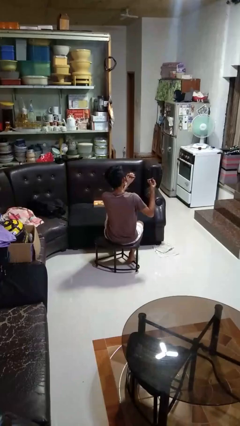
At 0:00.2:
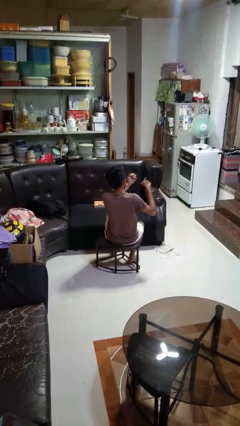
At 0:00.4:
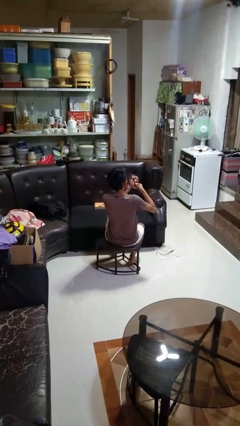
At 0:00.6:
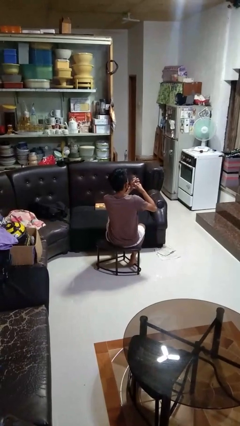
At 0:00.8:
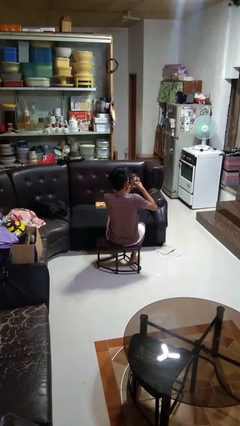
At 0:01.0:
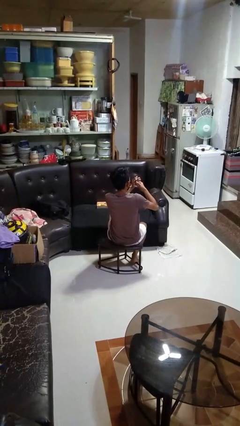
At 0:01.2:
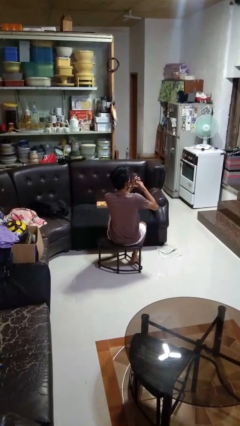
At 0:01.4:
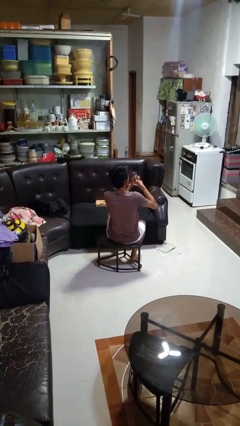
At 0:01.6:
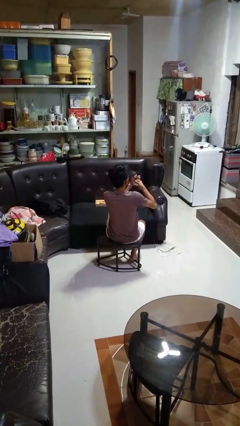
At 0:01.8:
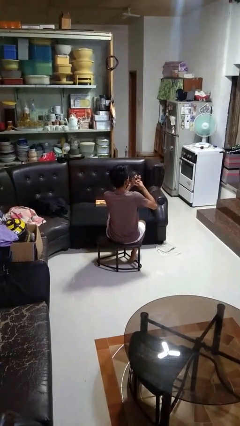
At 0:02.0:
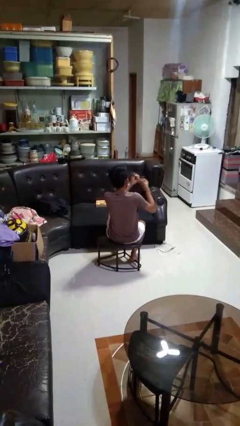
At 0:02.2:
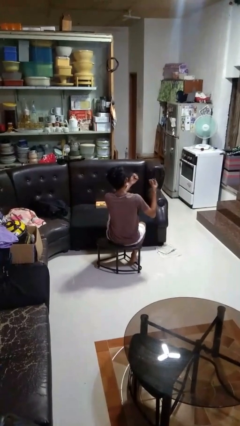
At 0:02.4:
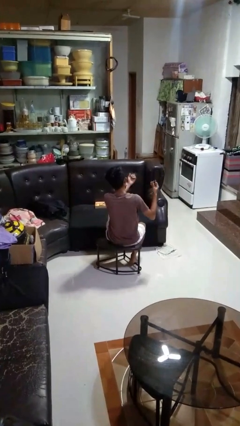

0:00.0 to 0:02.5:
person clips fingernails

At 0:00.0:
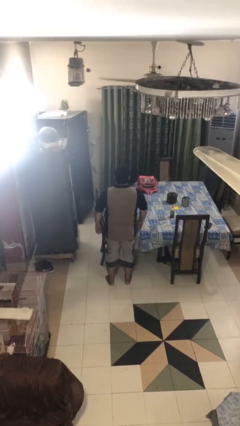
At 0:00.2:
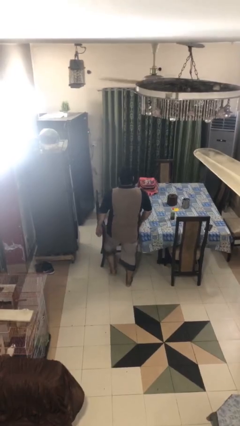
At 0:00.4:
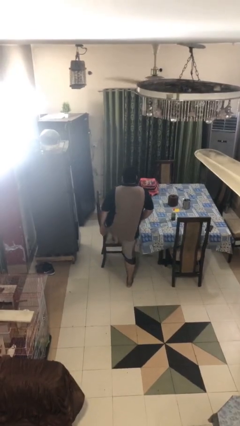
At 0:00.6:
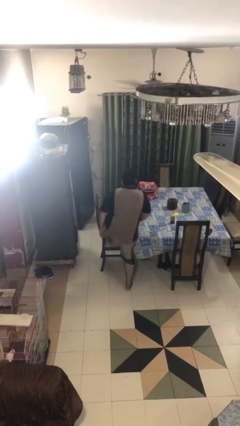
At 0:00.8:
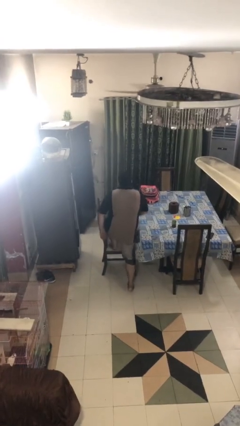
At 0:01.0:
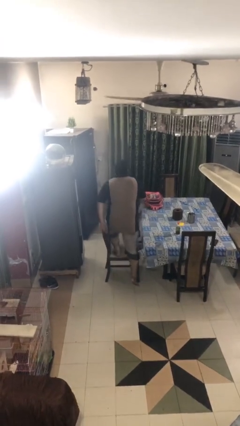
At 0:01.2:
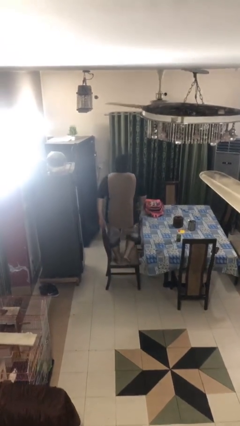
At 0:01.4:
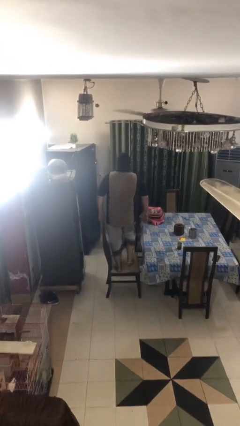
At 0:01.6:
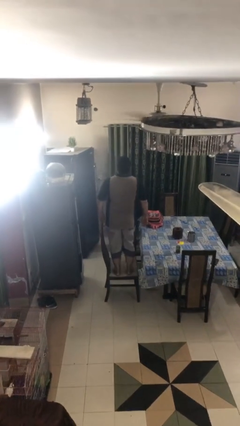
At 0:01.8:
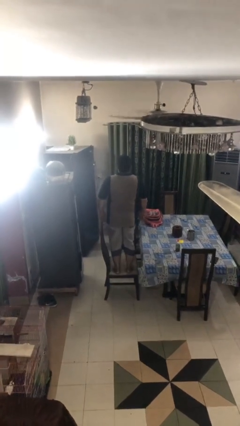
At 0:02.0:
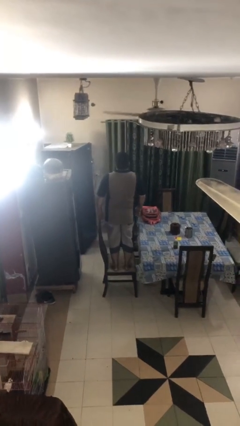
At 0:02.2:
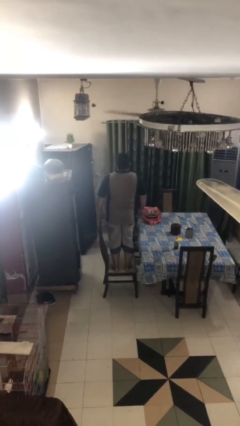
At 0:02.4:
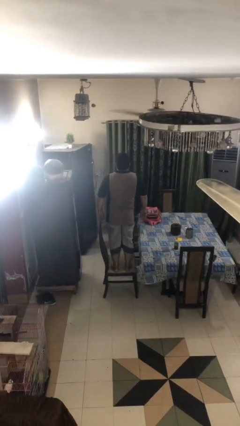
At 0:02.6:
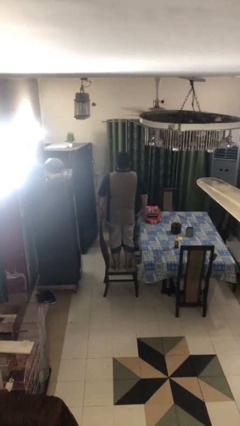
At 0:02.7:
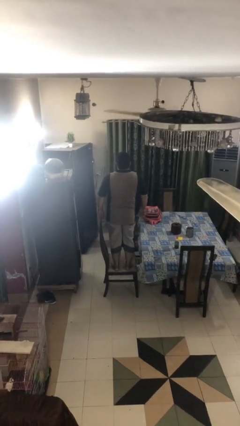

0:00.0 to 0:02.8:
person climbs on chair

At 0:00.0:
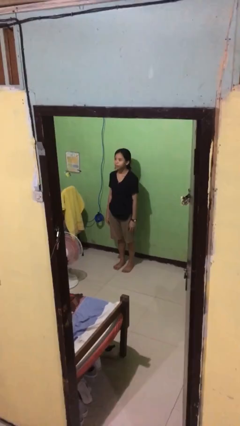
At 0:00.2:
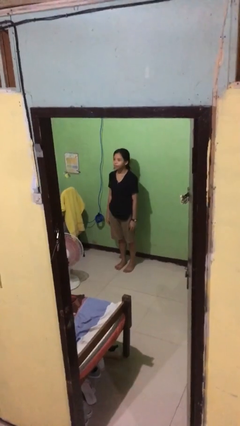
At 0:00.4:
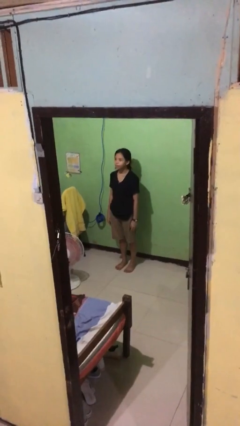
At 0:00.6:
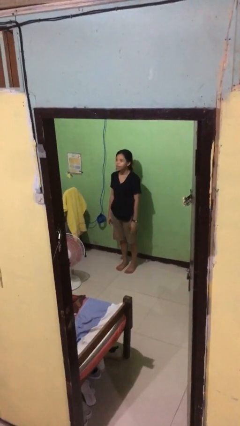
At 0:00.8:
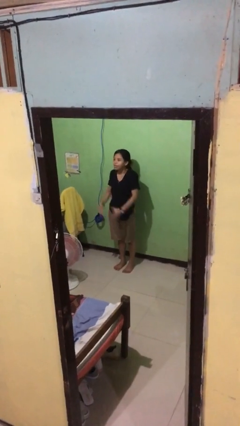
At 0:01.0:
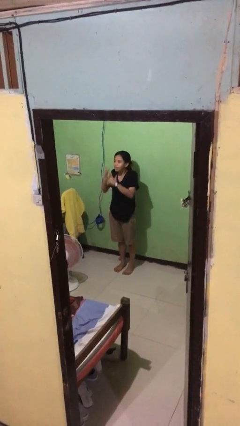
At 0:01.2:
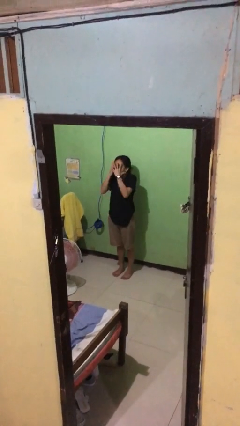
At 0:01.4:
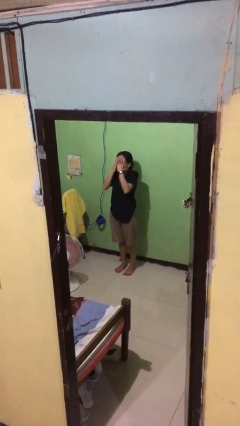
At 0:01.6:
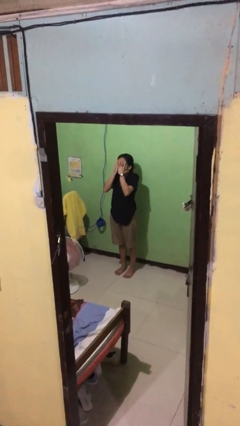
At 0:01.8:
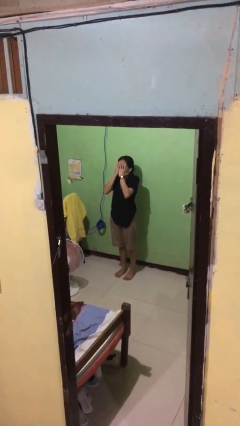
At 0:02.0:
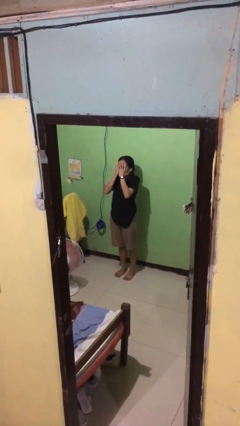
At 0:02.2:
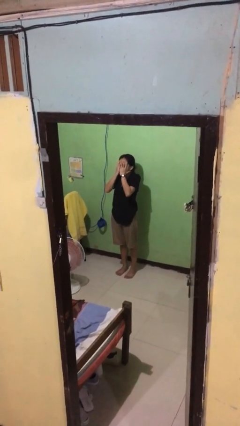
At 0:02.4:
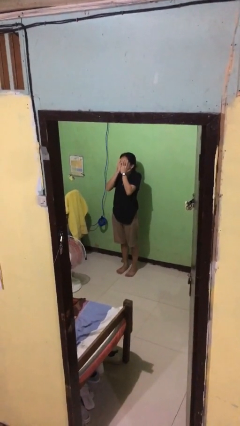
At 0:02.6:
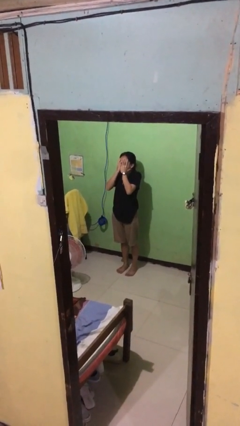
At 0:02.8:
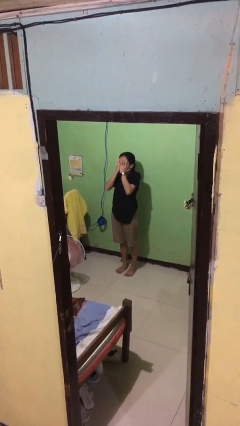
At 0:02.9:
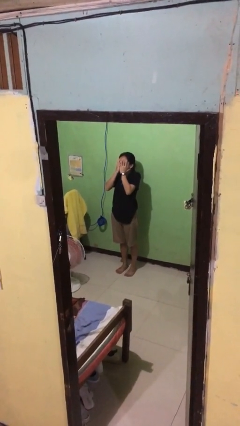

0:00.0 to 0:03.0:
person covers face with hands

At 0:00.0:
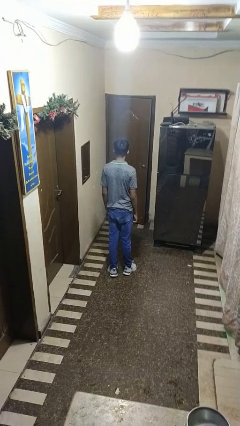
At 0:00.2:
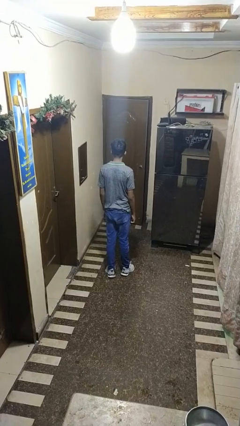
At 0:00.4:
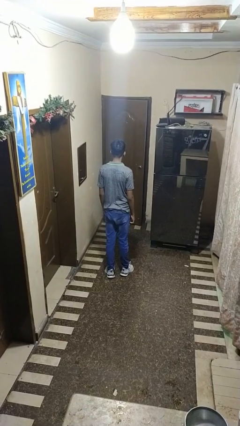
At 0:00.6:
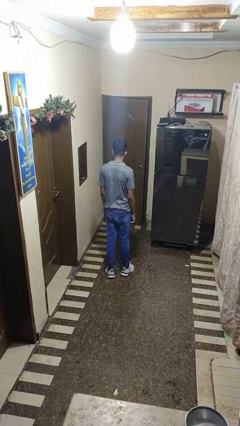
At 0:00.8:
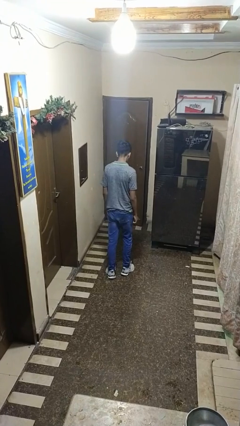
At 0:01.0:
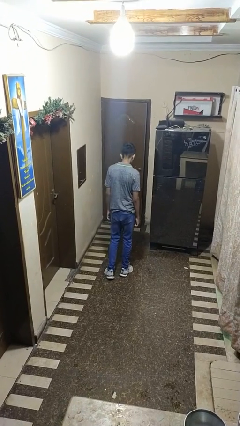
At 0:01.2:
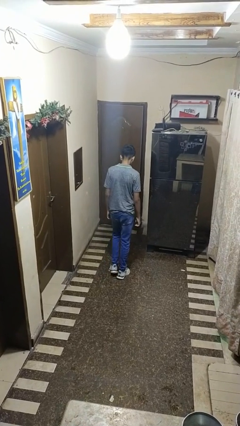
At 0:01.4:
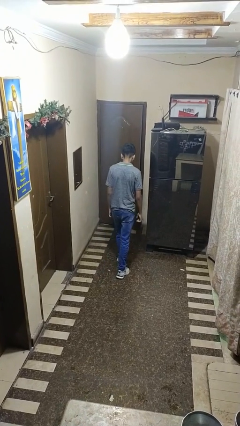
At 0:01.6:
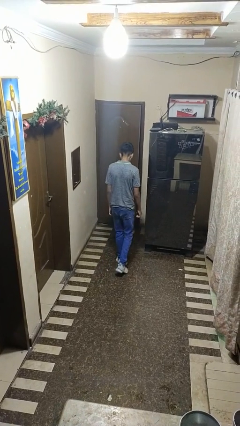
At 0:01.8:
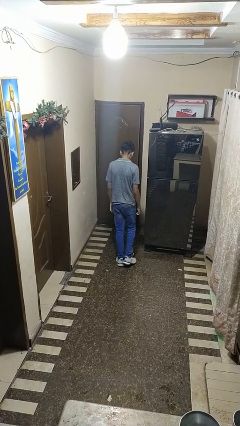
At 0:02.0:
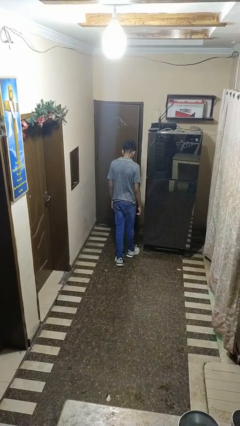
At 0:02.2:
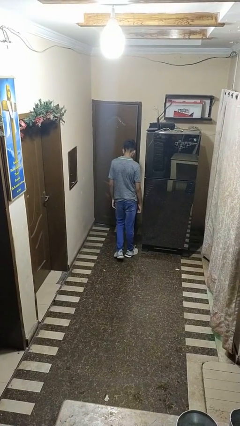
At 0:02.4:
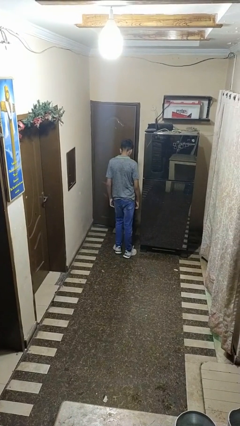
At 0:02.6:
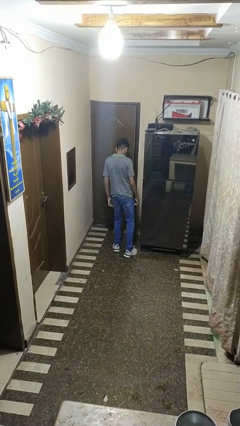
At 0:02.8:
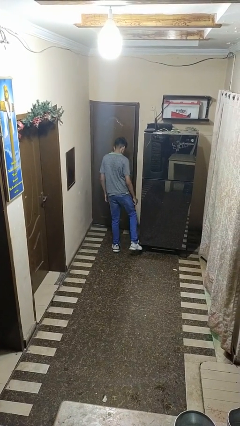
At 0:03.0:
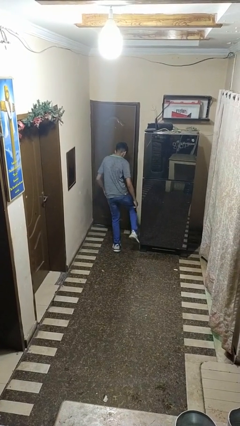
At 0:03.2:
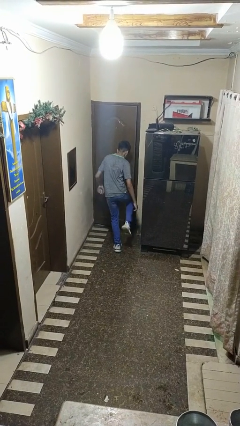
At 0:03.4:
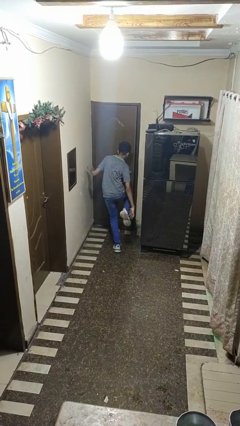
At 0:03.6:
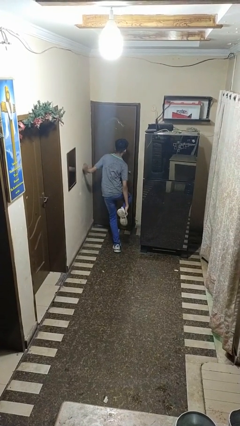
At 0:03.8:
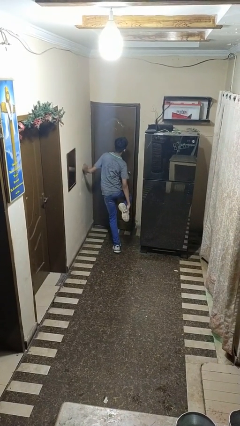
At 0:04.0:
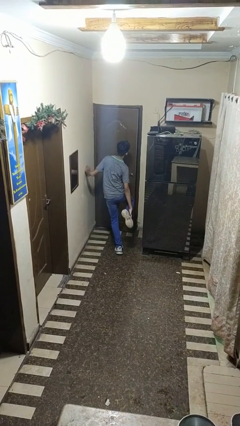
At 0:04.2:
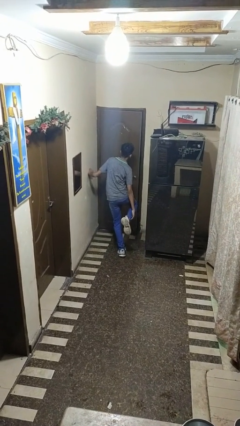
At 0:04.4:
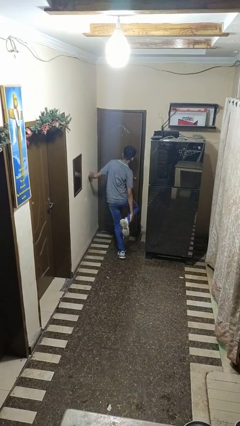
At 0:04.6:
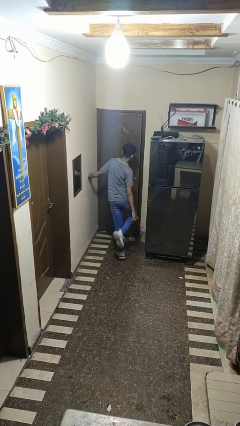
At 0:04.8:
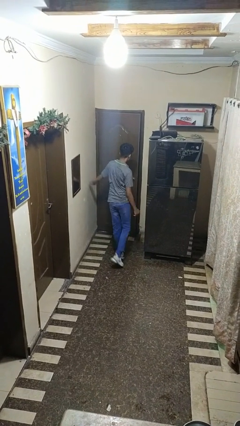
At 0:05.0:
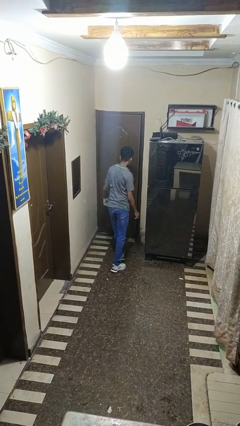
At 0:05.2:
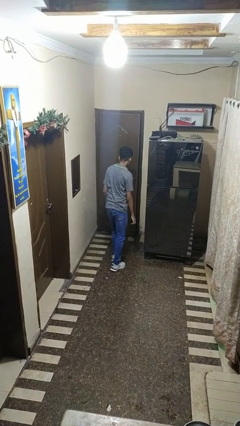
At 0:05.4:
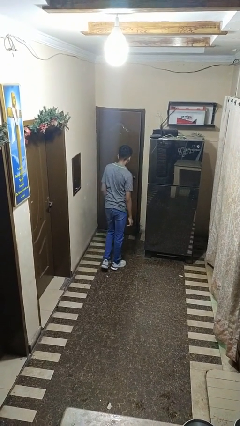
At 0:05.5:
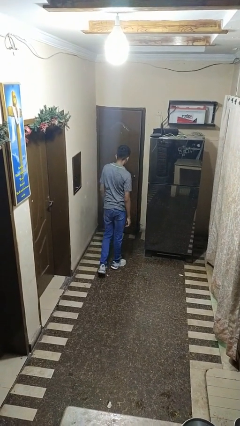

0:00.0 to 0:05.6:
person stubs toe

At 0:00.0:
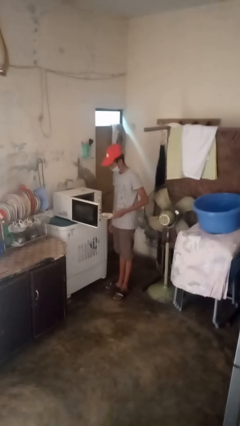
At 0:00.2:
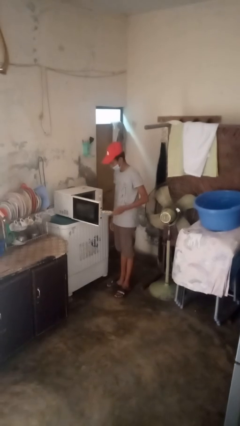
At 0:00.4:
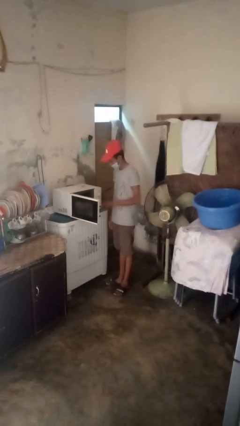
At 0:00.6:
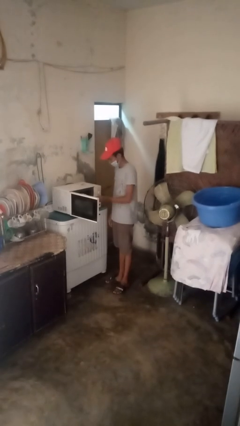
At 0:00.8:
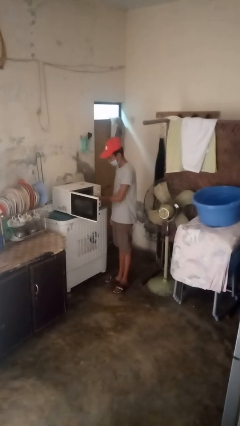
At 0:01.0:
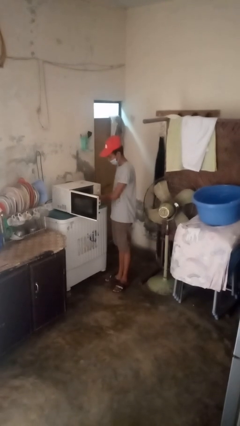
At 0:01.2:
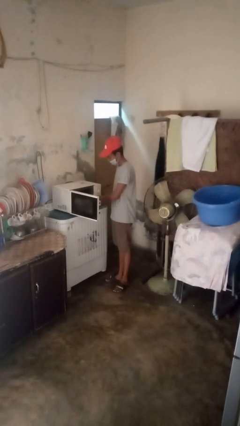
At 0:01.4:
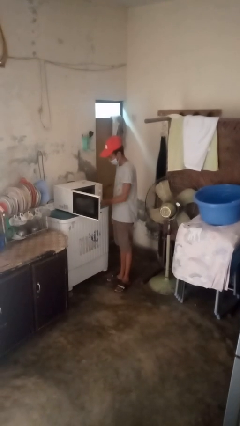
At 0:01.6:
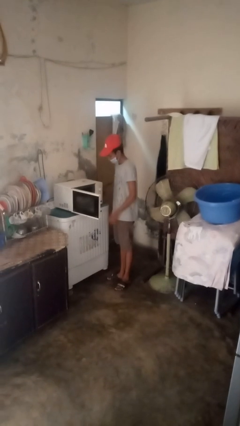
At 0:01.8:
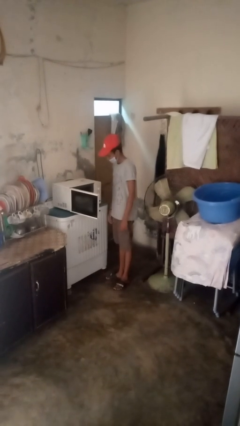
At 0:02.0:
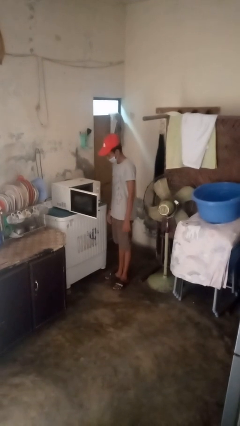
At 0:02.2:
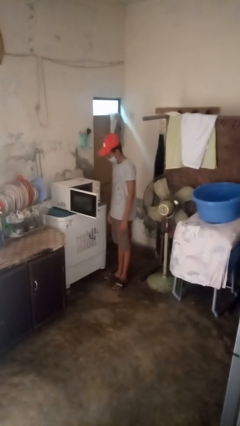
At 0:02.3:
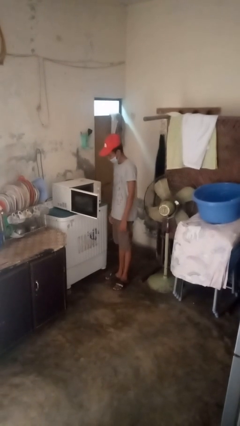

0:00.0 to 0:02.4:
person puts object into microwave

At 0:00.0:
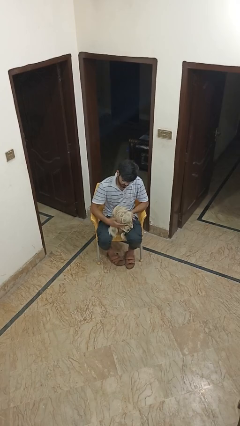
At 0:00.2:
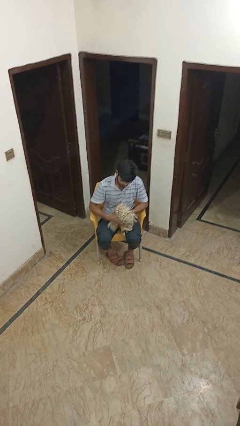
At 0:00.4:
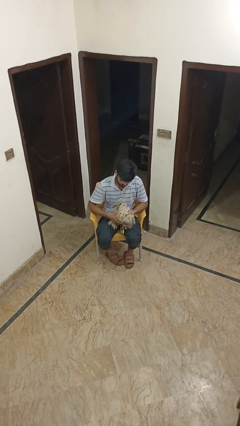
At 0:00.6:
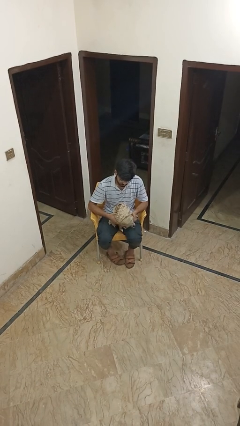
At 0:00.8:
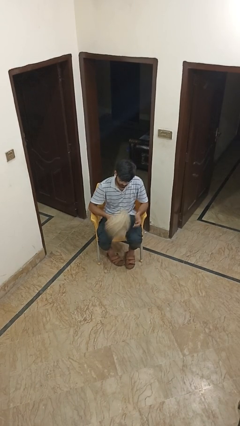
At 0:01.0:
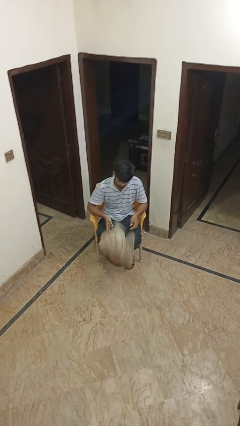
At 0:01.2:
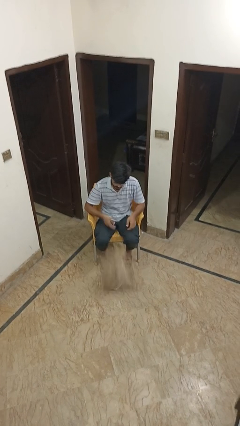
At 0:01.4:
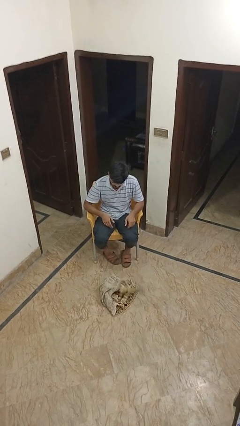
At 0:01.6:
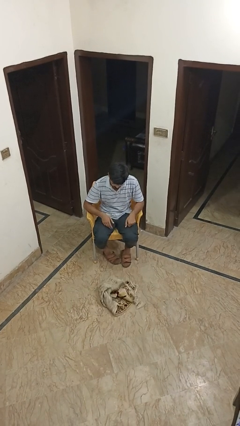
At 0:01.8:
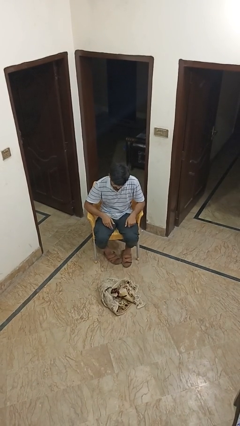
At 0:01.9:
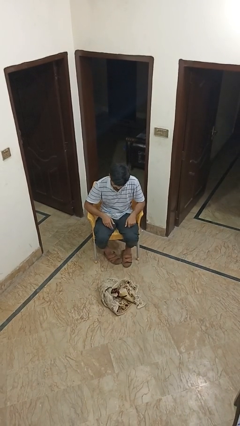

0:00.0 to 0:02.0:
person drops object
